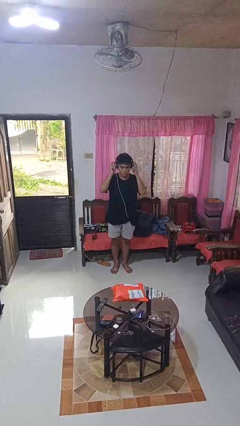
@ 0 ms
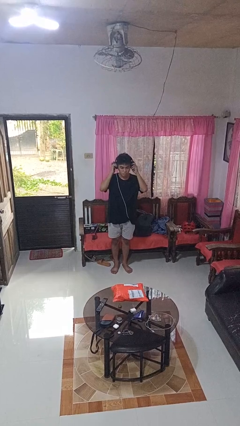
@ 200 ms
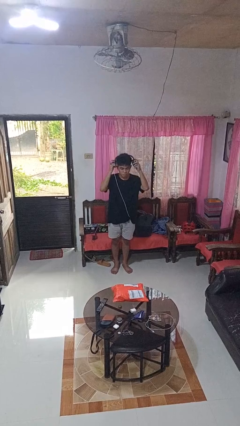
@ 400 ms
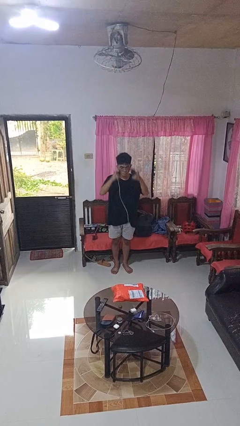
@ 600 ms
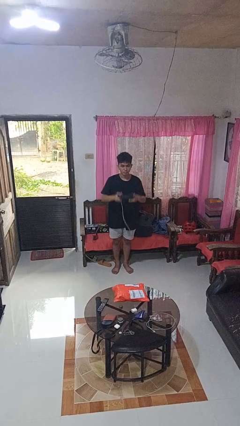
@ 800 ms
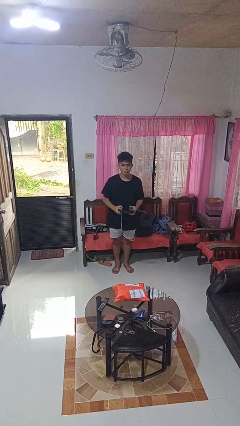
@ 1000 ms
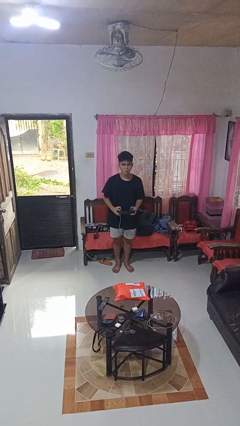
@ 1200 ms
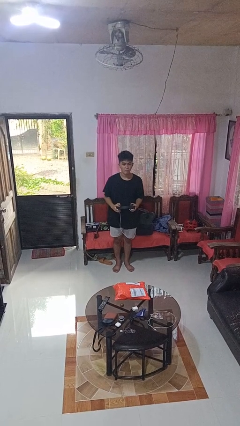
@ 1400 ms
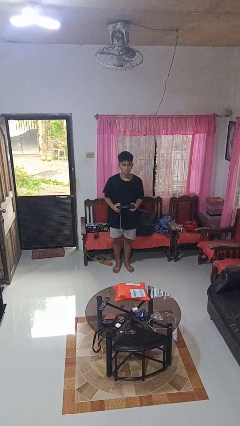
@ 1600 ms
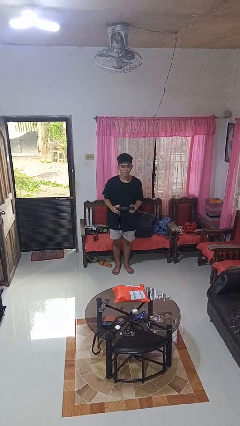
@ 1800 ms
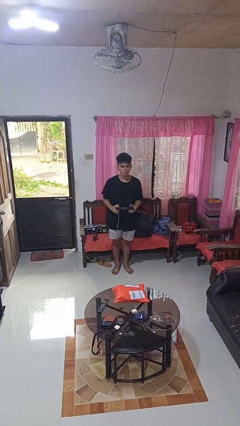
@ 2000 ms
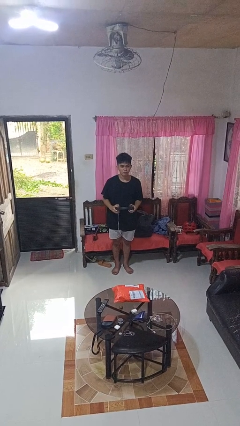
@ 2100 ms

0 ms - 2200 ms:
person takes off headphones

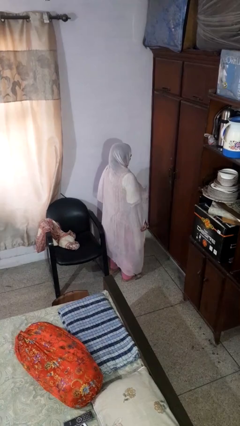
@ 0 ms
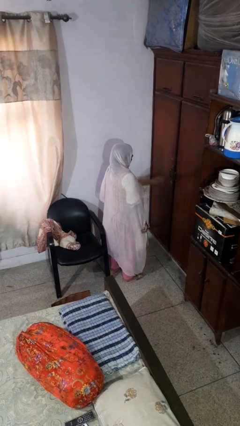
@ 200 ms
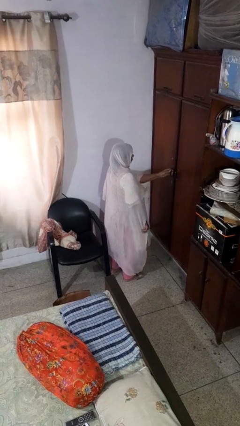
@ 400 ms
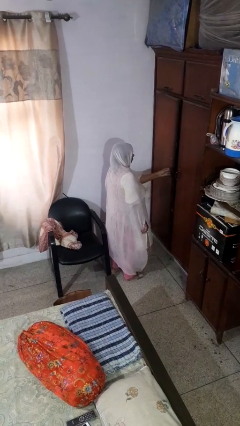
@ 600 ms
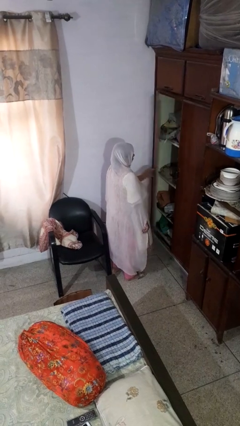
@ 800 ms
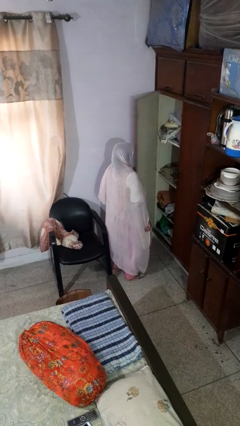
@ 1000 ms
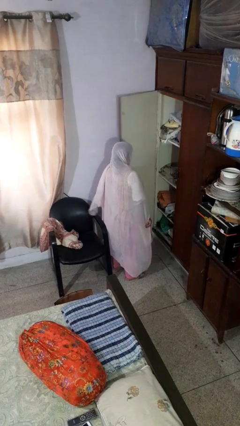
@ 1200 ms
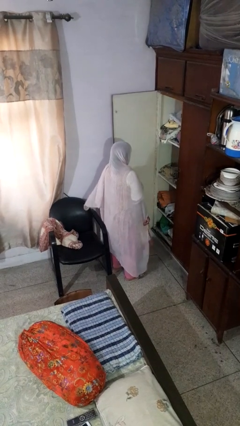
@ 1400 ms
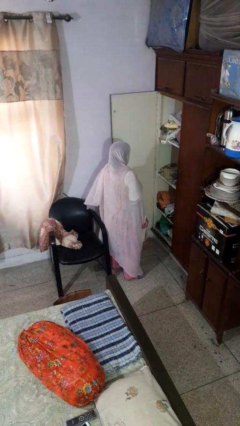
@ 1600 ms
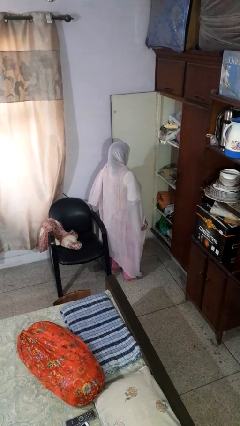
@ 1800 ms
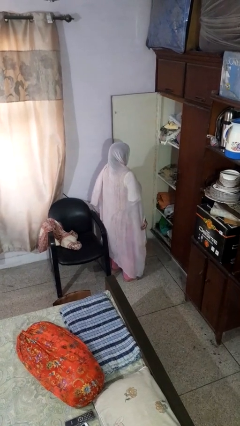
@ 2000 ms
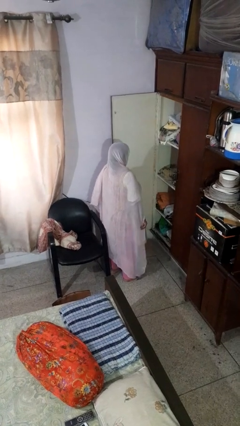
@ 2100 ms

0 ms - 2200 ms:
person opens closet door

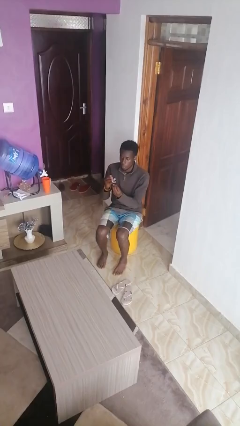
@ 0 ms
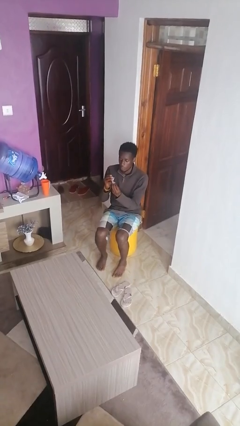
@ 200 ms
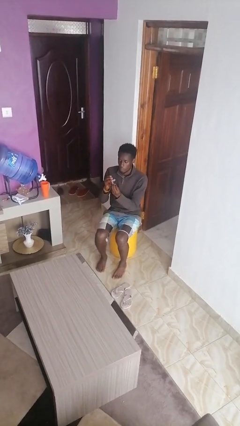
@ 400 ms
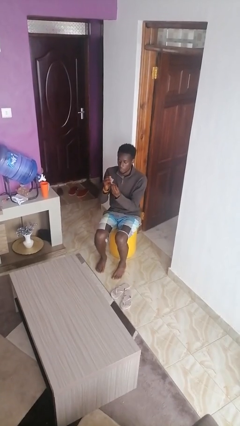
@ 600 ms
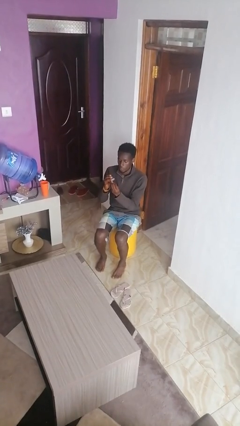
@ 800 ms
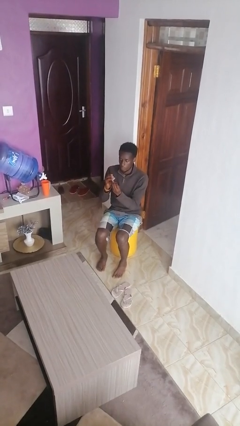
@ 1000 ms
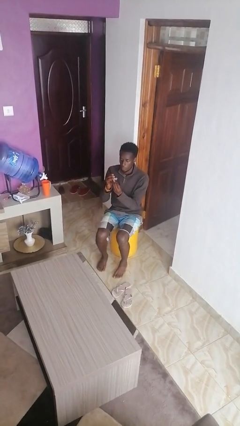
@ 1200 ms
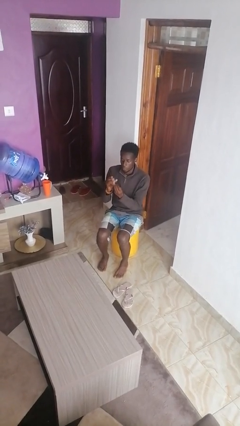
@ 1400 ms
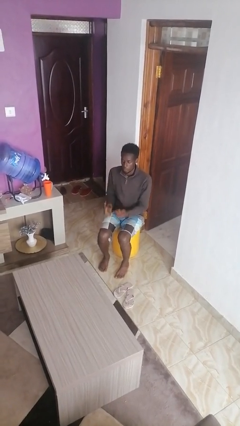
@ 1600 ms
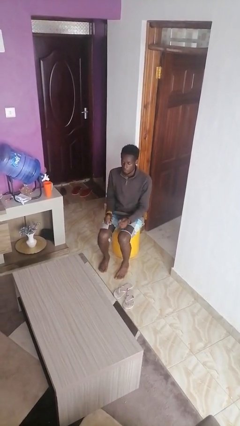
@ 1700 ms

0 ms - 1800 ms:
person clips fingernails

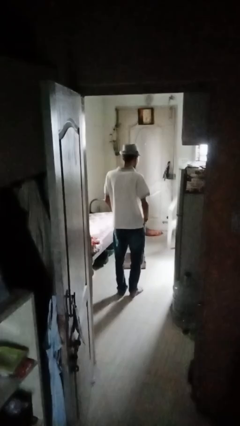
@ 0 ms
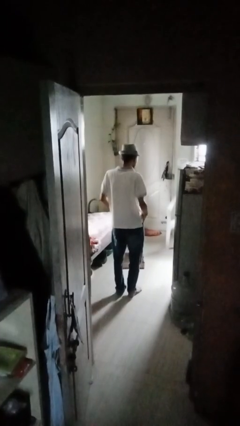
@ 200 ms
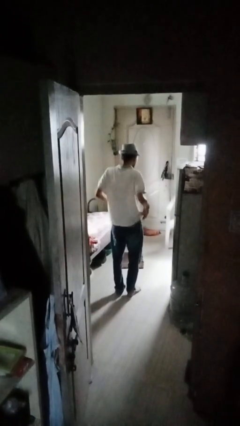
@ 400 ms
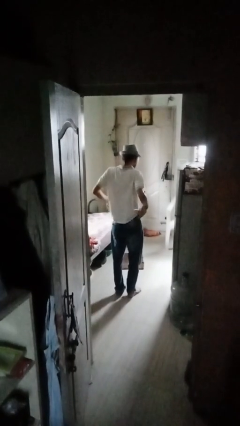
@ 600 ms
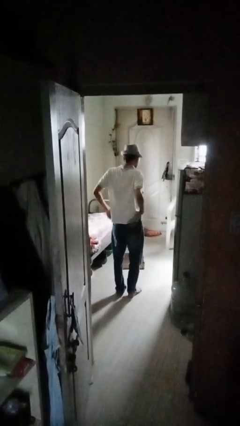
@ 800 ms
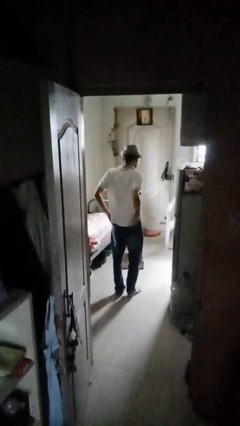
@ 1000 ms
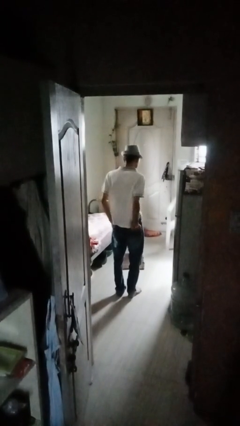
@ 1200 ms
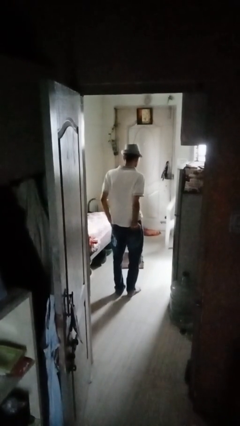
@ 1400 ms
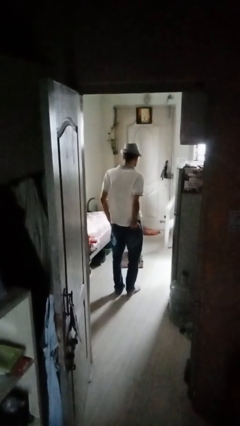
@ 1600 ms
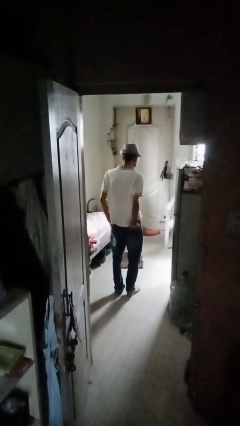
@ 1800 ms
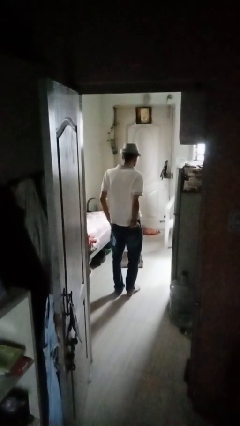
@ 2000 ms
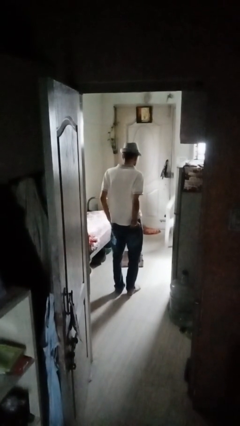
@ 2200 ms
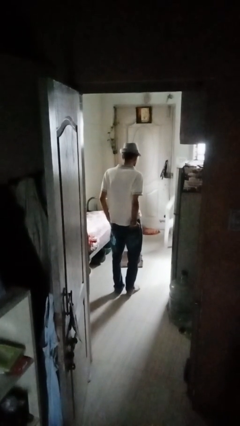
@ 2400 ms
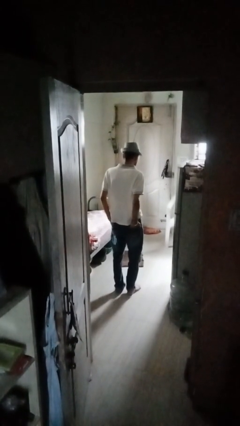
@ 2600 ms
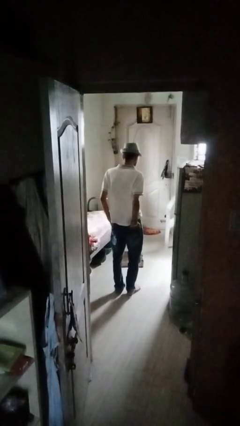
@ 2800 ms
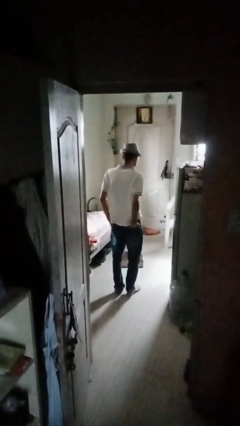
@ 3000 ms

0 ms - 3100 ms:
person puts hands in back pockets

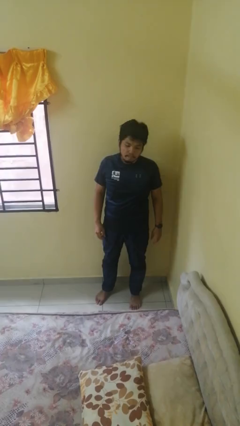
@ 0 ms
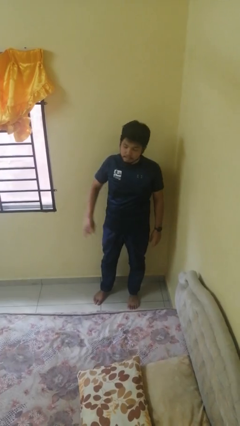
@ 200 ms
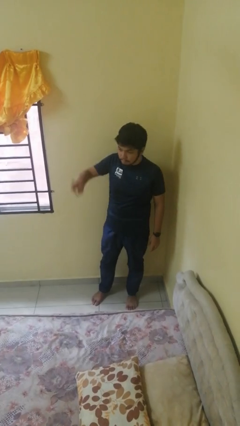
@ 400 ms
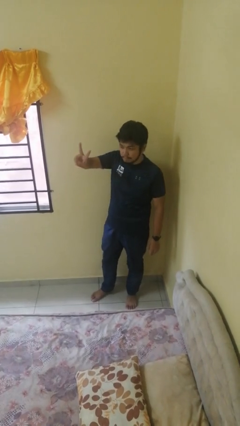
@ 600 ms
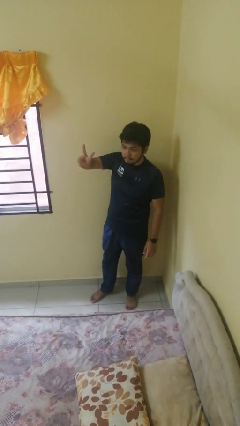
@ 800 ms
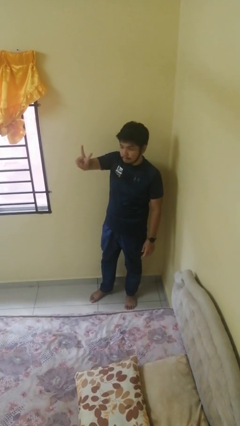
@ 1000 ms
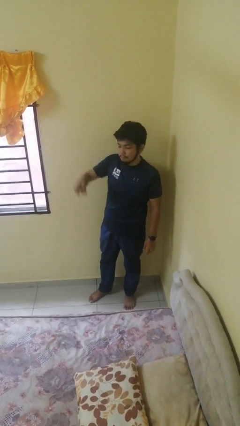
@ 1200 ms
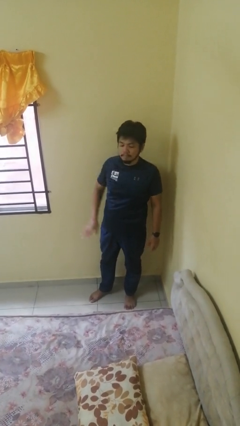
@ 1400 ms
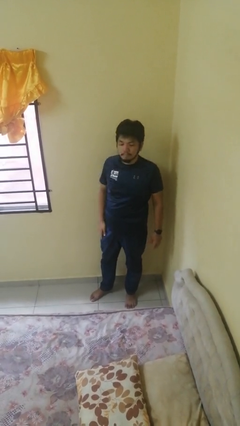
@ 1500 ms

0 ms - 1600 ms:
person gestures peace

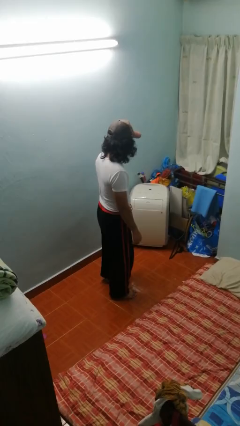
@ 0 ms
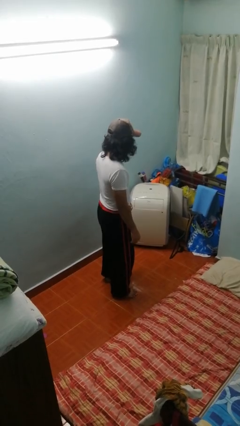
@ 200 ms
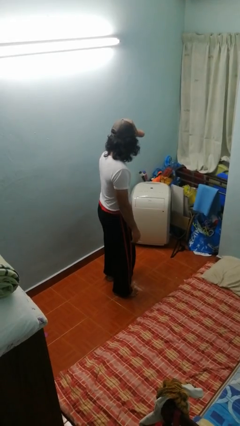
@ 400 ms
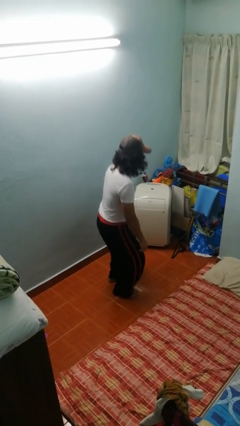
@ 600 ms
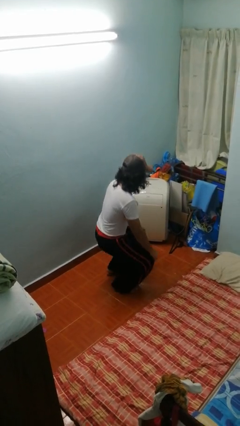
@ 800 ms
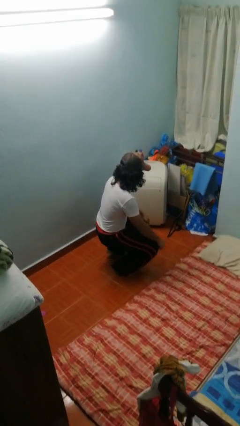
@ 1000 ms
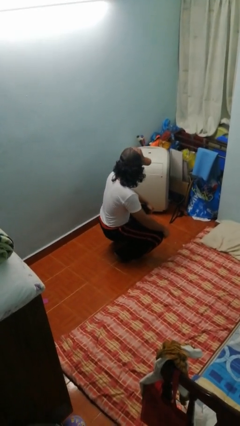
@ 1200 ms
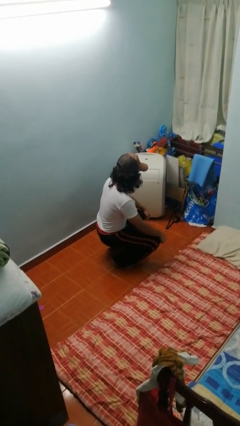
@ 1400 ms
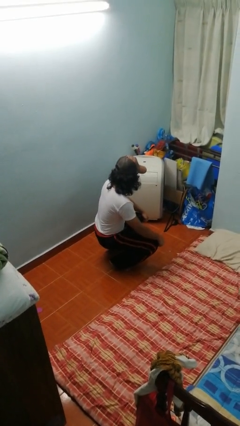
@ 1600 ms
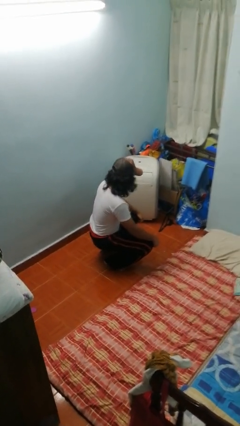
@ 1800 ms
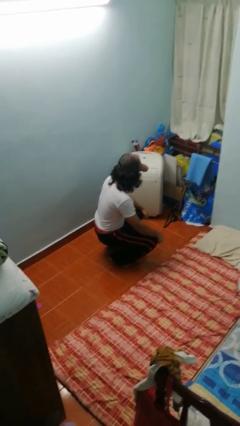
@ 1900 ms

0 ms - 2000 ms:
person squats

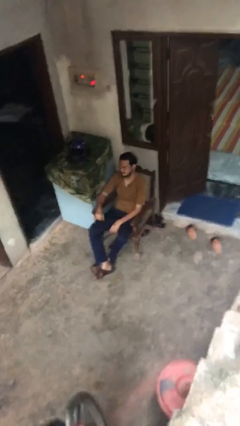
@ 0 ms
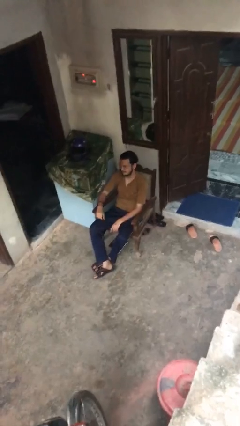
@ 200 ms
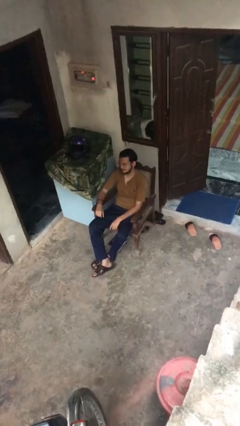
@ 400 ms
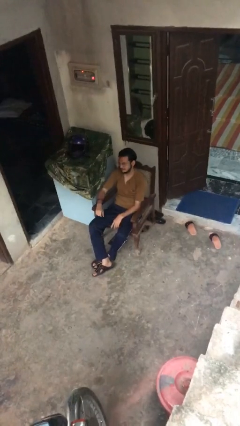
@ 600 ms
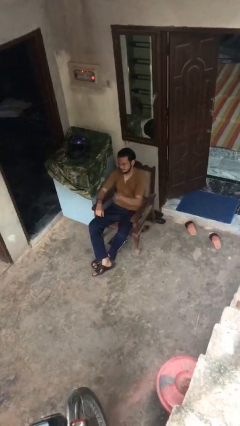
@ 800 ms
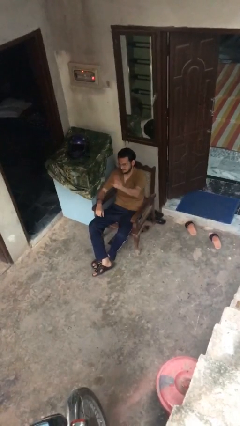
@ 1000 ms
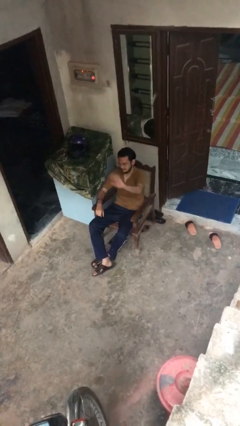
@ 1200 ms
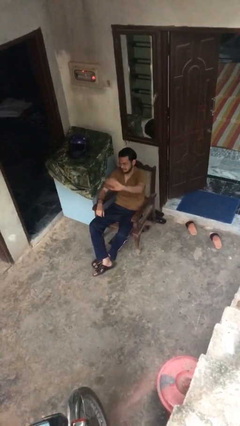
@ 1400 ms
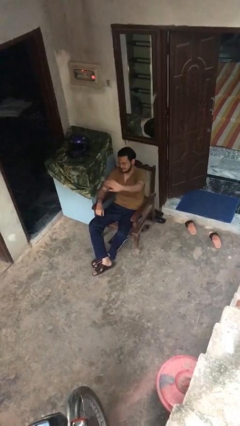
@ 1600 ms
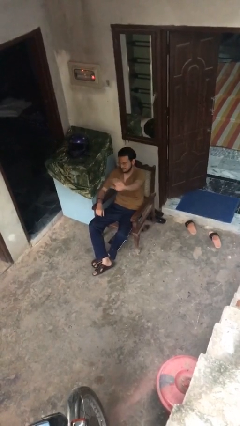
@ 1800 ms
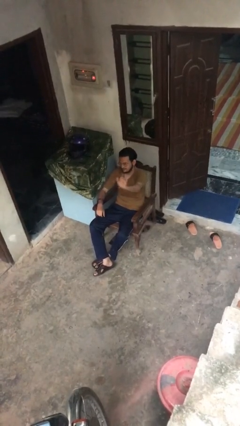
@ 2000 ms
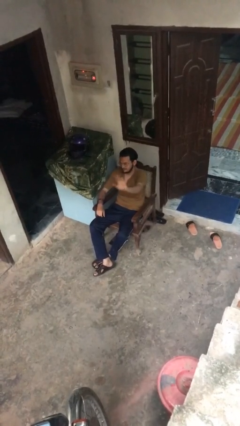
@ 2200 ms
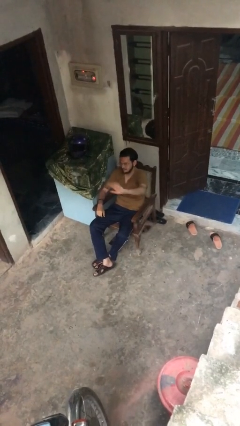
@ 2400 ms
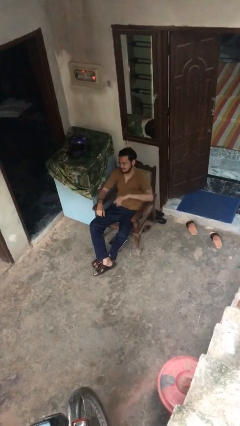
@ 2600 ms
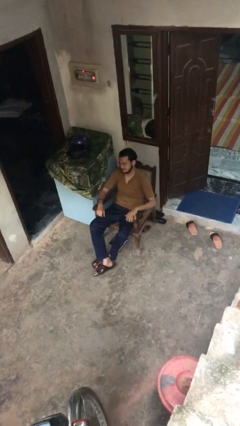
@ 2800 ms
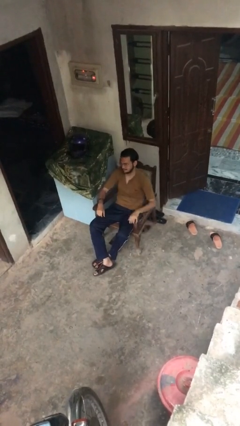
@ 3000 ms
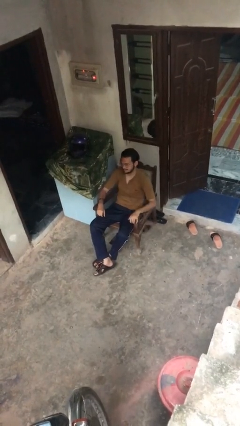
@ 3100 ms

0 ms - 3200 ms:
person waves at person

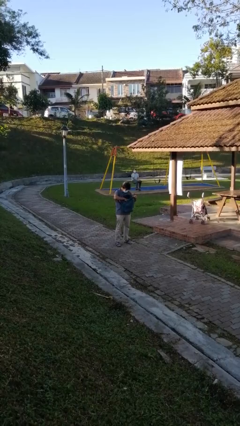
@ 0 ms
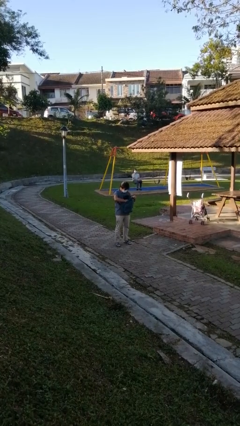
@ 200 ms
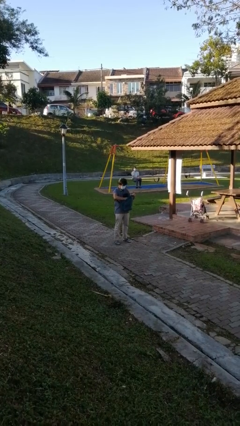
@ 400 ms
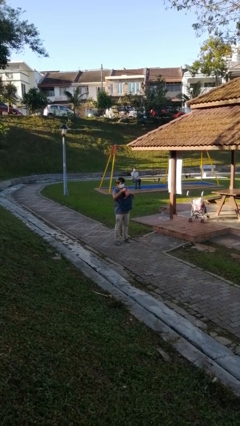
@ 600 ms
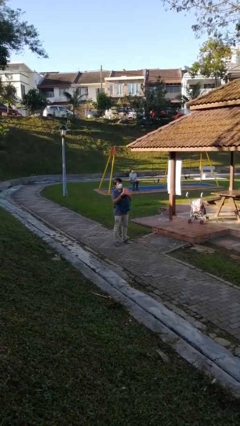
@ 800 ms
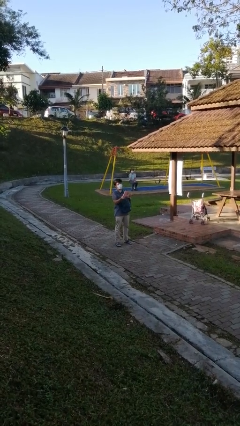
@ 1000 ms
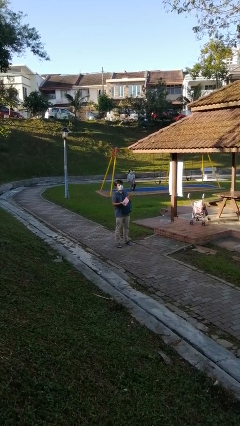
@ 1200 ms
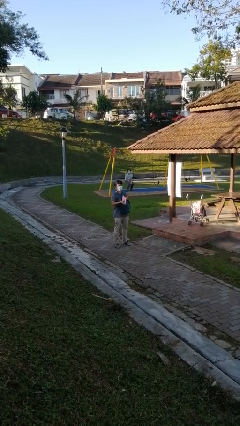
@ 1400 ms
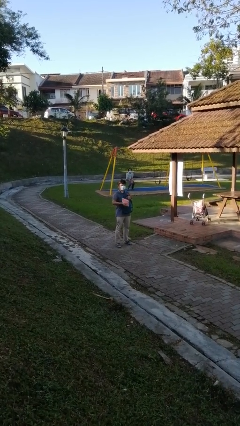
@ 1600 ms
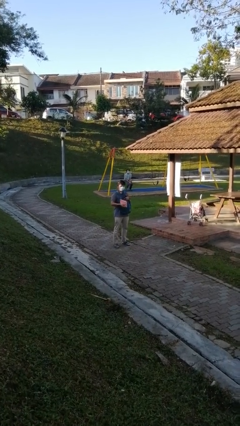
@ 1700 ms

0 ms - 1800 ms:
person takes object from backpack
